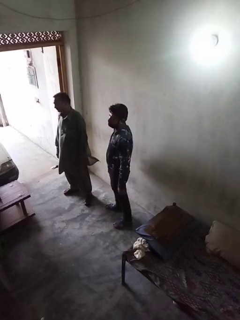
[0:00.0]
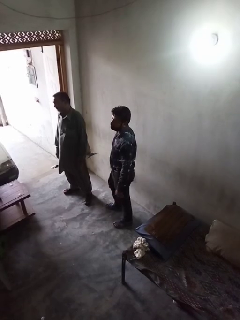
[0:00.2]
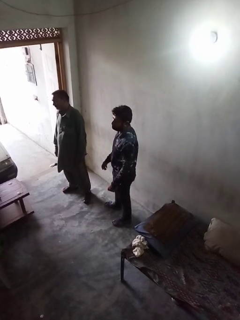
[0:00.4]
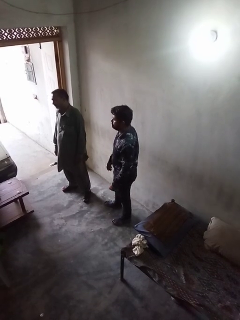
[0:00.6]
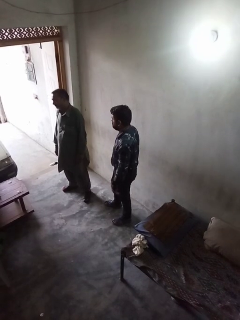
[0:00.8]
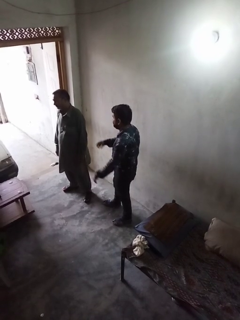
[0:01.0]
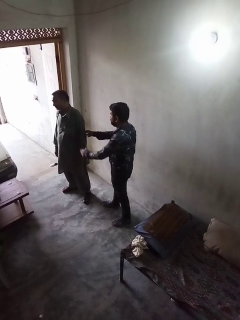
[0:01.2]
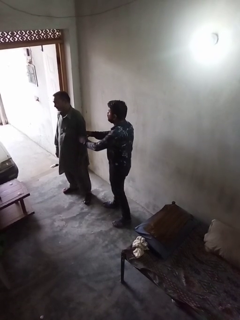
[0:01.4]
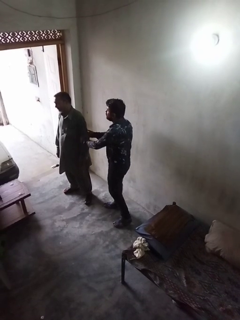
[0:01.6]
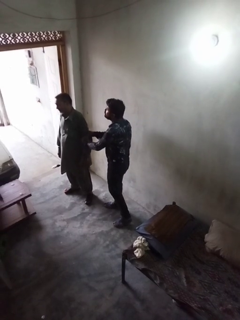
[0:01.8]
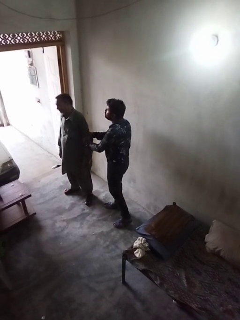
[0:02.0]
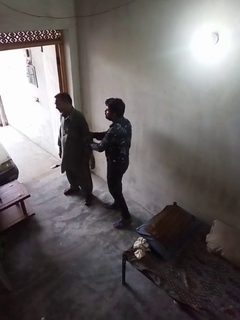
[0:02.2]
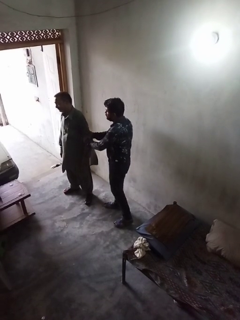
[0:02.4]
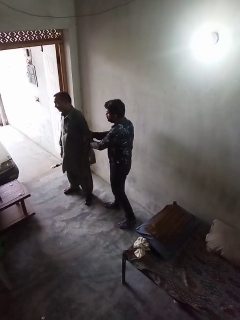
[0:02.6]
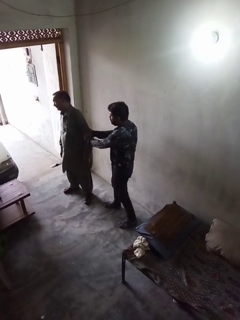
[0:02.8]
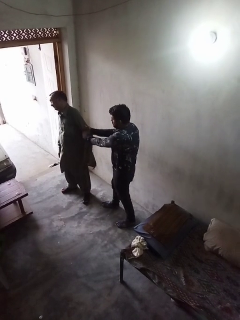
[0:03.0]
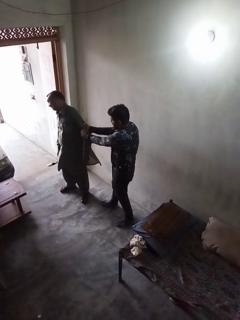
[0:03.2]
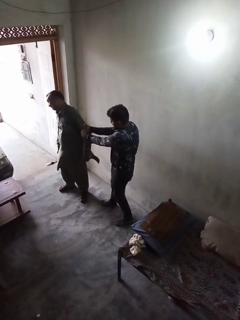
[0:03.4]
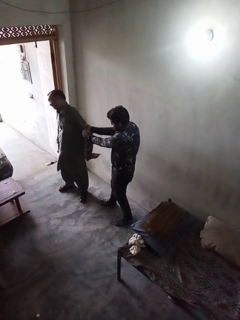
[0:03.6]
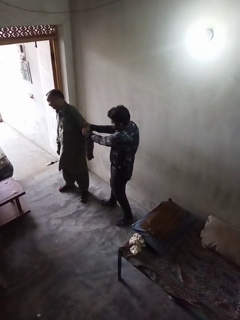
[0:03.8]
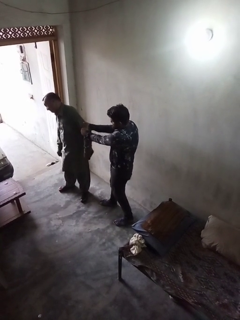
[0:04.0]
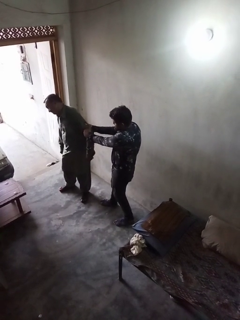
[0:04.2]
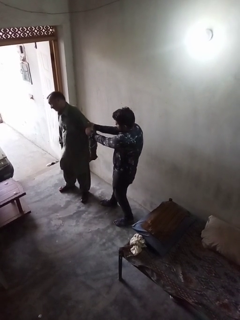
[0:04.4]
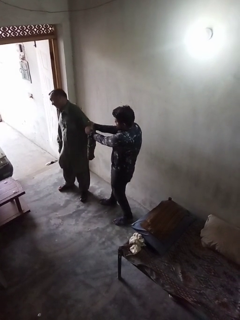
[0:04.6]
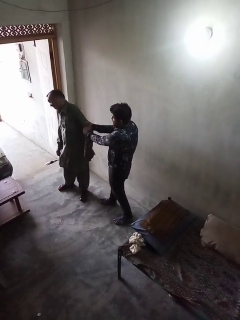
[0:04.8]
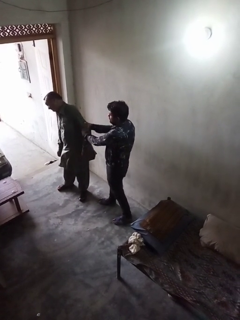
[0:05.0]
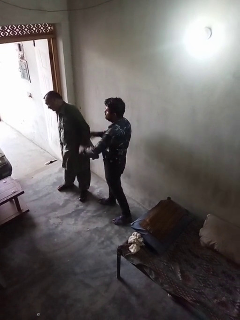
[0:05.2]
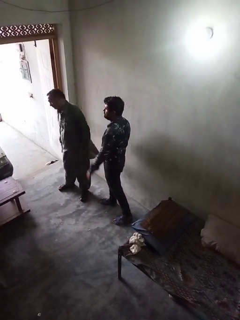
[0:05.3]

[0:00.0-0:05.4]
person grabs person by forearm

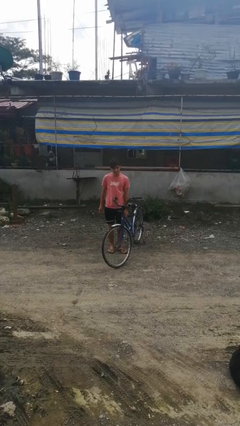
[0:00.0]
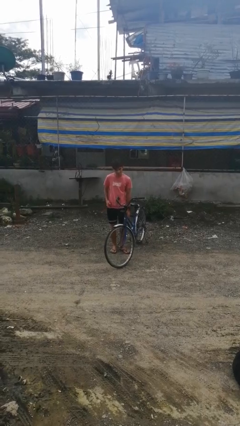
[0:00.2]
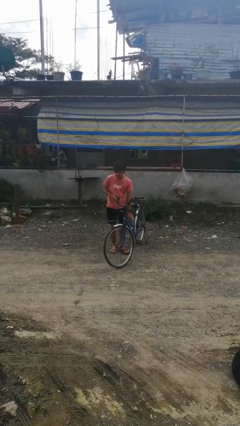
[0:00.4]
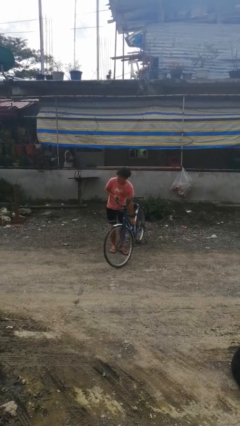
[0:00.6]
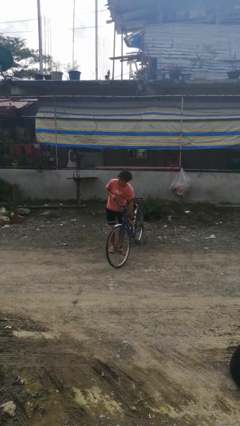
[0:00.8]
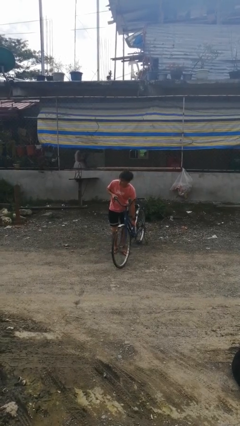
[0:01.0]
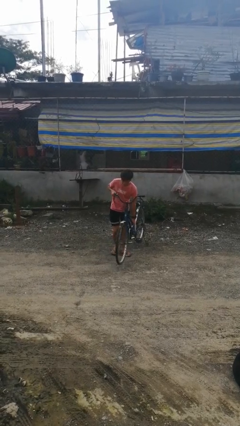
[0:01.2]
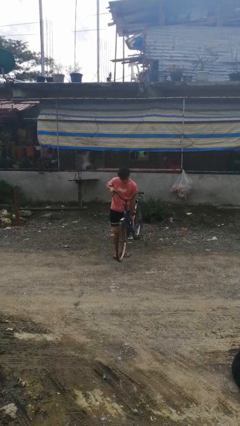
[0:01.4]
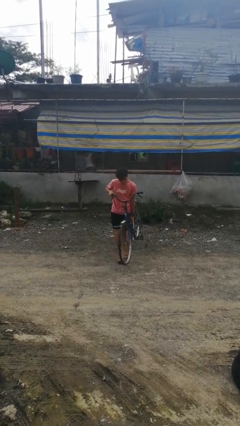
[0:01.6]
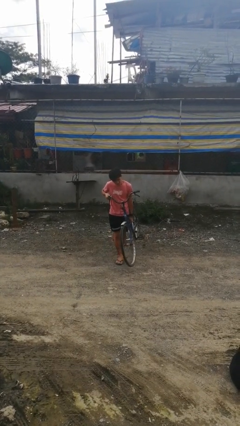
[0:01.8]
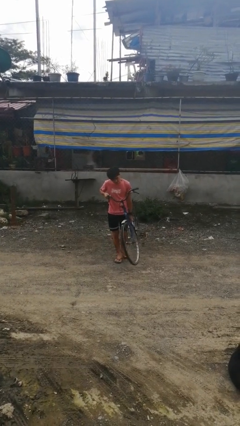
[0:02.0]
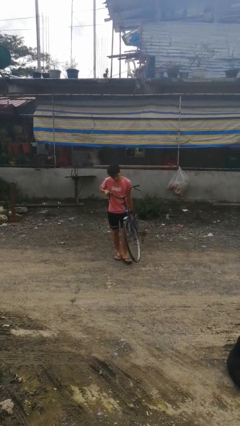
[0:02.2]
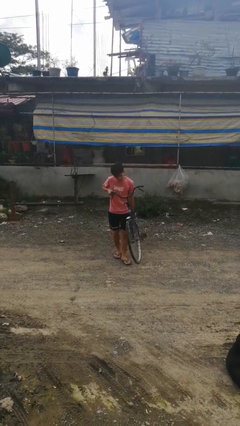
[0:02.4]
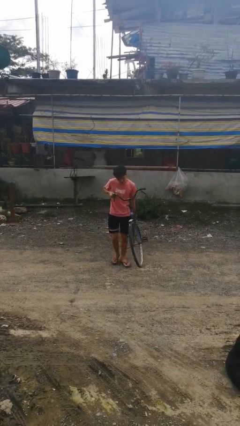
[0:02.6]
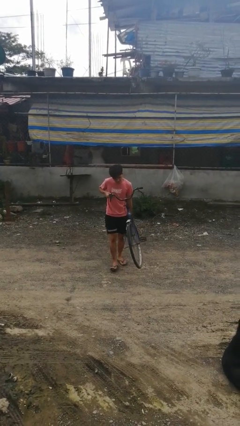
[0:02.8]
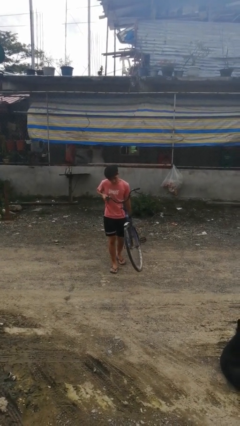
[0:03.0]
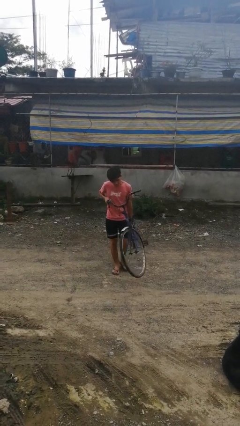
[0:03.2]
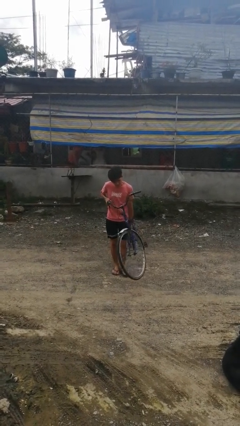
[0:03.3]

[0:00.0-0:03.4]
person carries bicycle

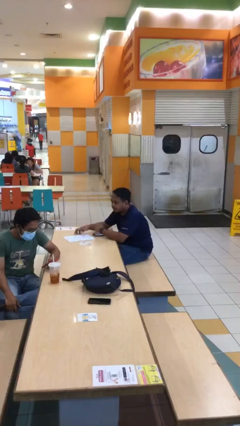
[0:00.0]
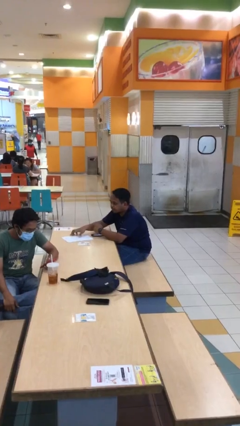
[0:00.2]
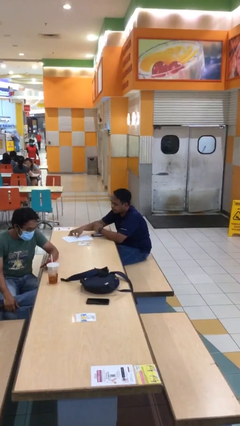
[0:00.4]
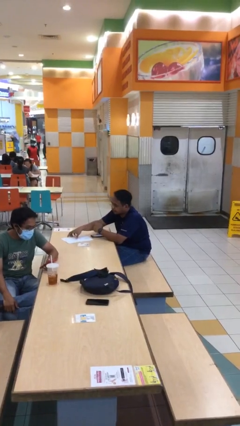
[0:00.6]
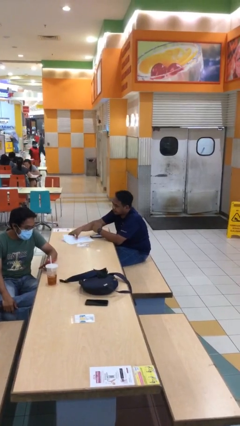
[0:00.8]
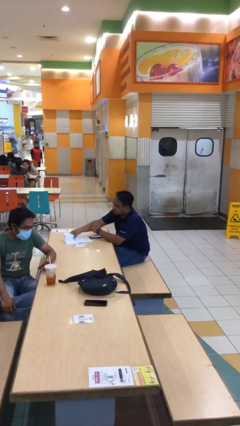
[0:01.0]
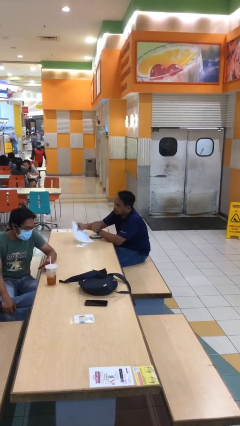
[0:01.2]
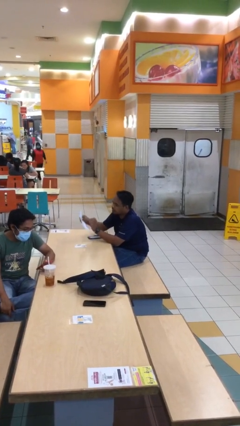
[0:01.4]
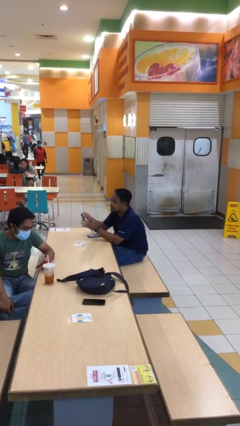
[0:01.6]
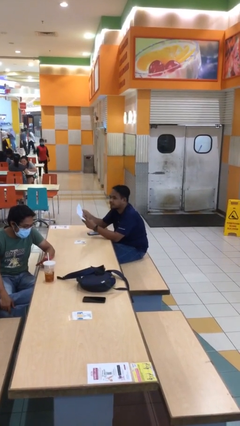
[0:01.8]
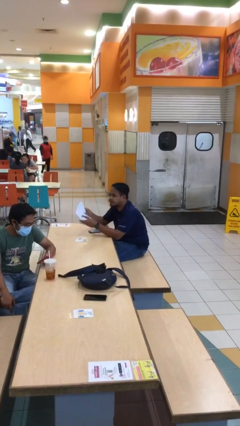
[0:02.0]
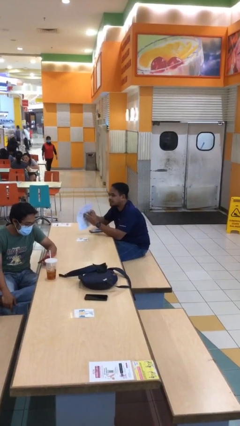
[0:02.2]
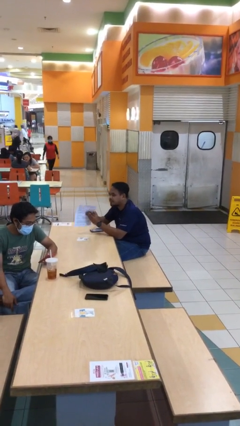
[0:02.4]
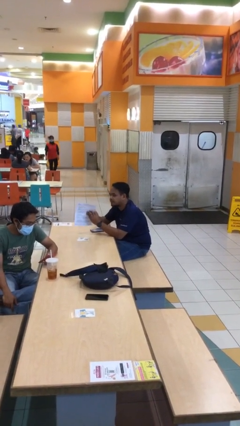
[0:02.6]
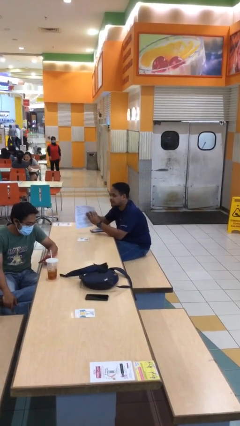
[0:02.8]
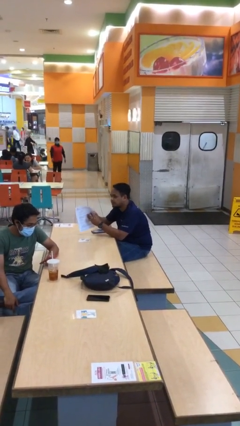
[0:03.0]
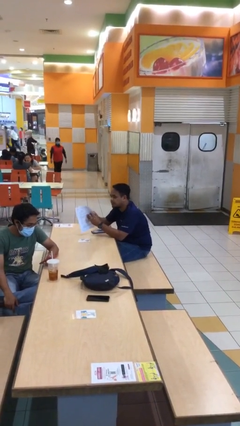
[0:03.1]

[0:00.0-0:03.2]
person picks up object from table

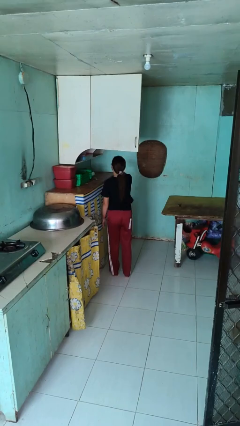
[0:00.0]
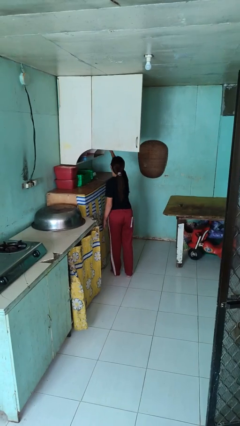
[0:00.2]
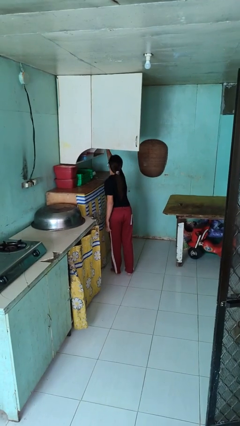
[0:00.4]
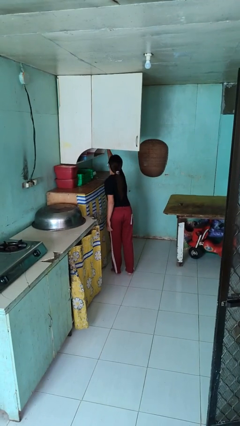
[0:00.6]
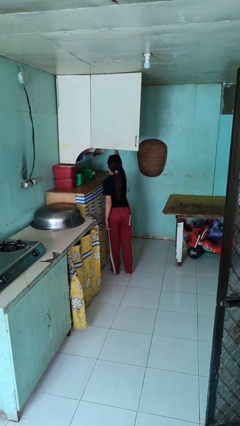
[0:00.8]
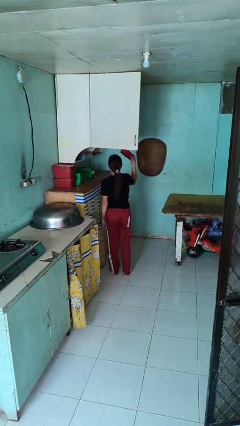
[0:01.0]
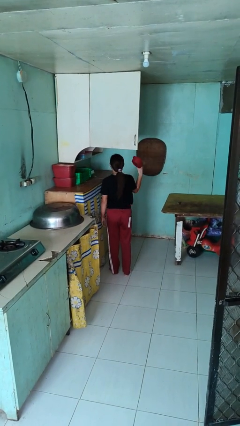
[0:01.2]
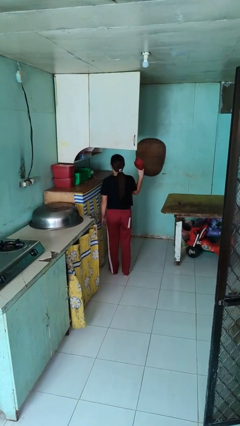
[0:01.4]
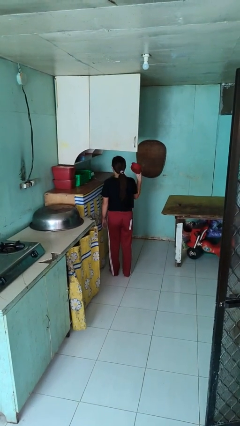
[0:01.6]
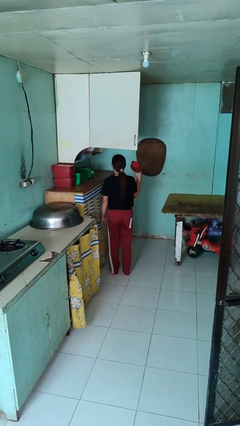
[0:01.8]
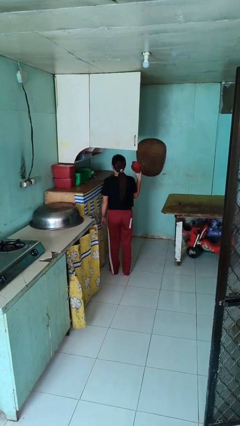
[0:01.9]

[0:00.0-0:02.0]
person takes object from cabinet

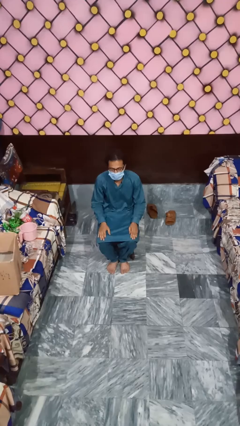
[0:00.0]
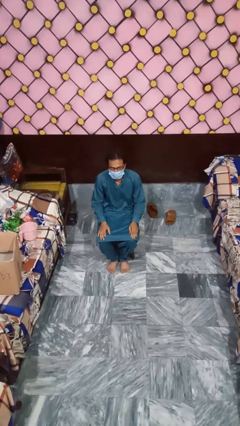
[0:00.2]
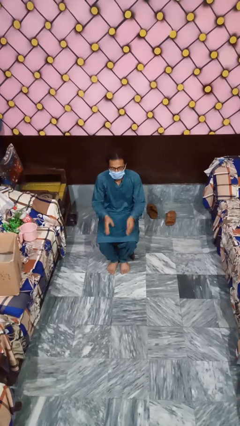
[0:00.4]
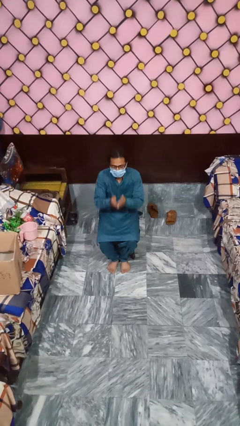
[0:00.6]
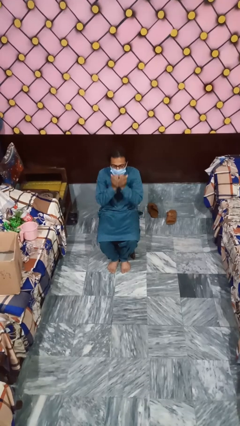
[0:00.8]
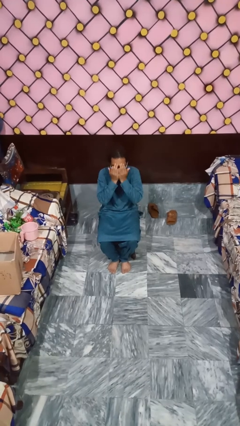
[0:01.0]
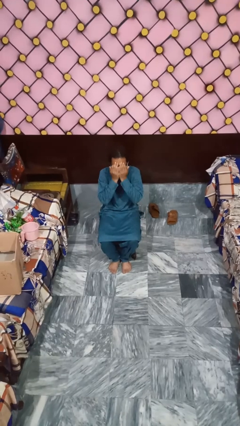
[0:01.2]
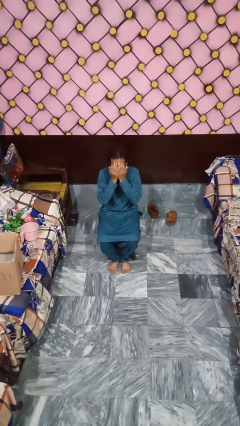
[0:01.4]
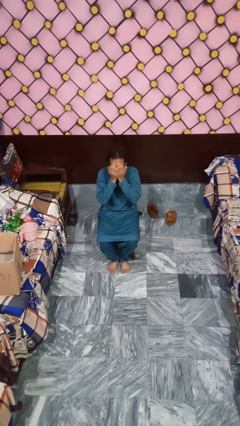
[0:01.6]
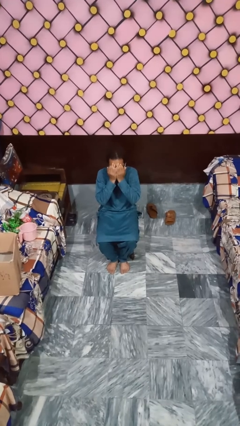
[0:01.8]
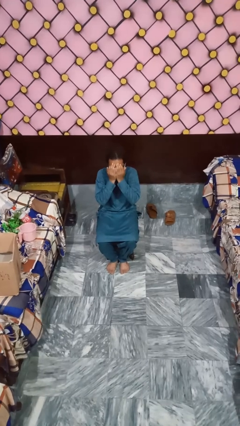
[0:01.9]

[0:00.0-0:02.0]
person covers face with hands

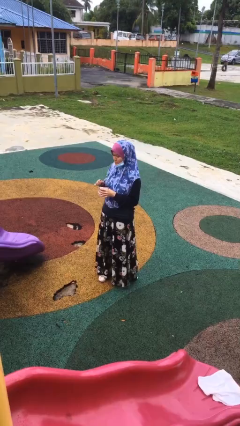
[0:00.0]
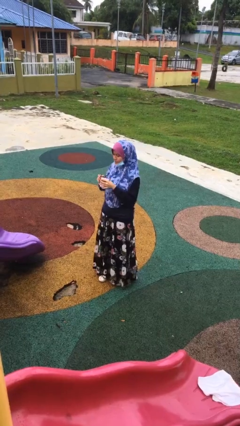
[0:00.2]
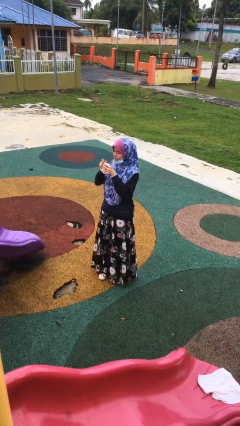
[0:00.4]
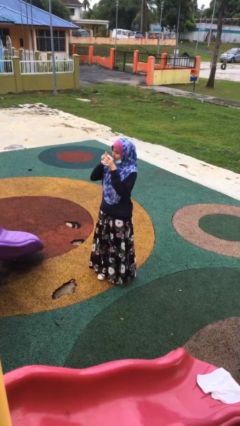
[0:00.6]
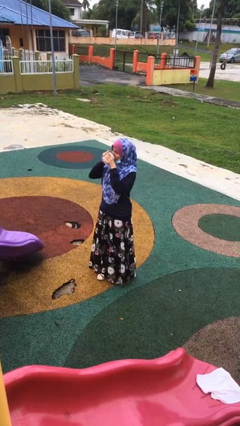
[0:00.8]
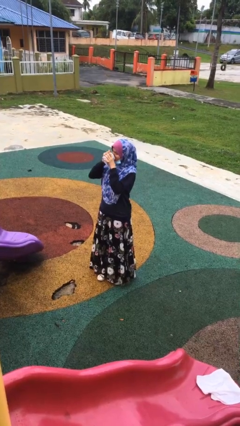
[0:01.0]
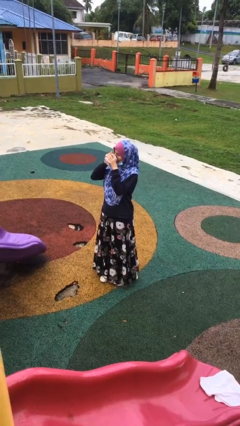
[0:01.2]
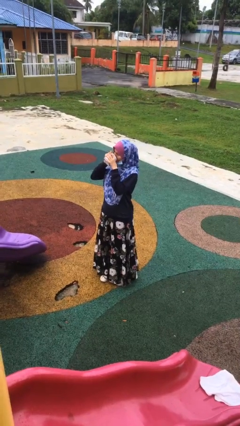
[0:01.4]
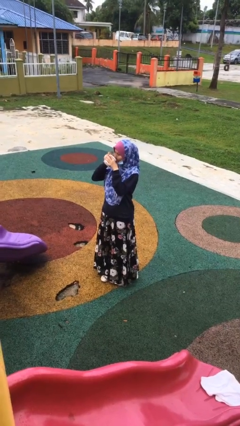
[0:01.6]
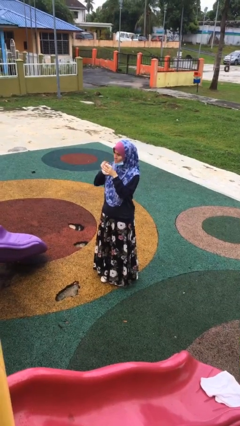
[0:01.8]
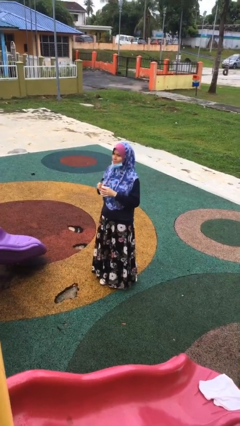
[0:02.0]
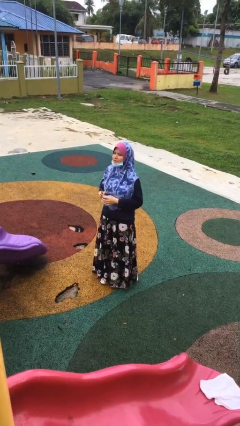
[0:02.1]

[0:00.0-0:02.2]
person drinks from mug

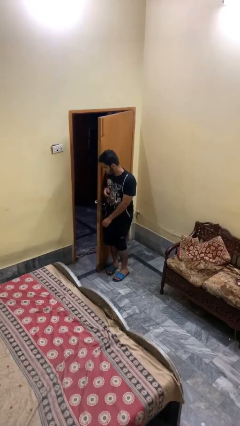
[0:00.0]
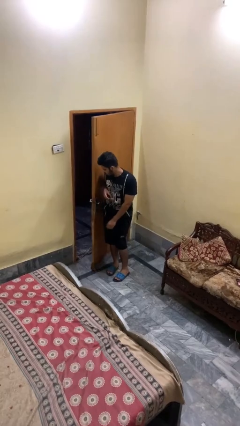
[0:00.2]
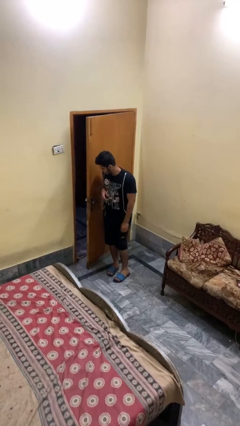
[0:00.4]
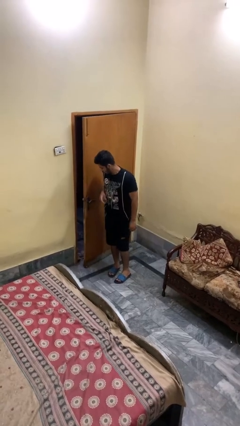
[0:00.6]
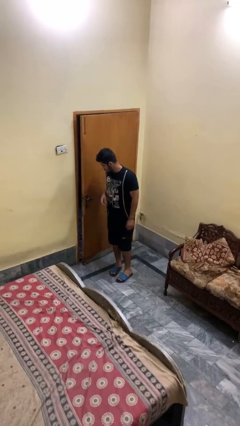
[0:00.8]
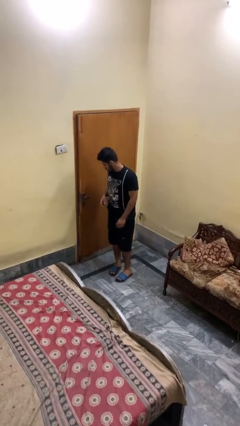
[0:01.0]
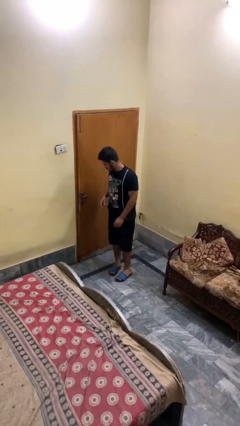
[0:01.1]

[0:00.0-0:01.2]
person closes door with hip
